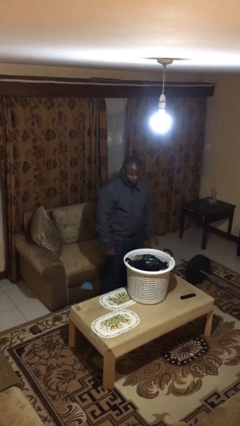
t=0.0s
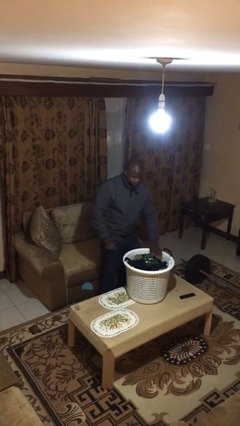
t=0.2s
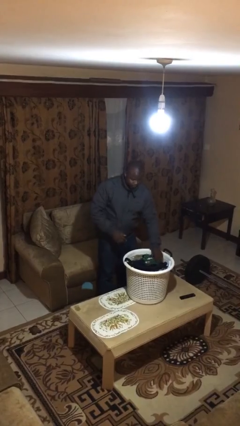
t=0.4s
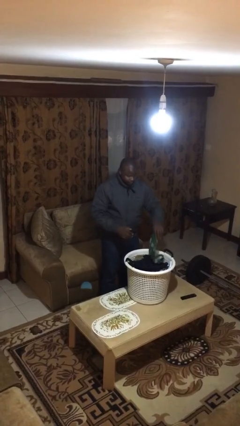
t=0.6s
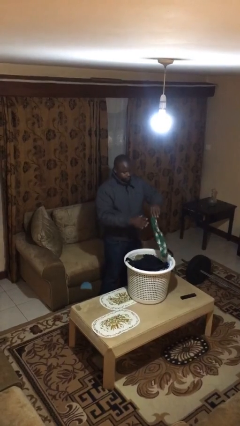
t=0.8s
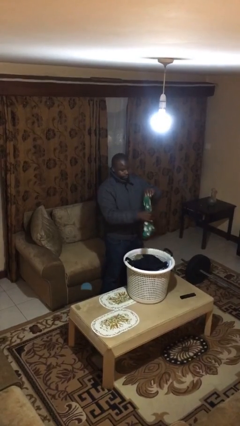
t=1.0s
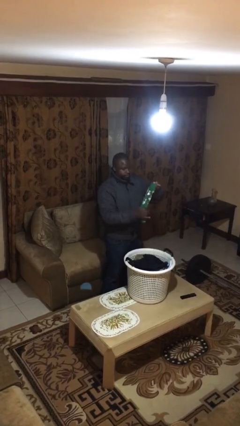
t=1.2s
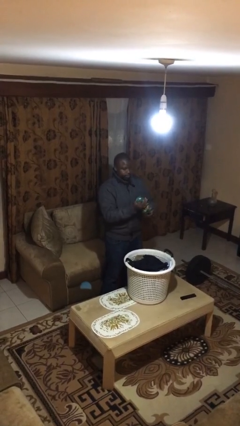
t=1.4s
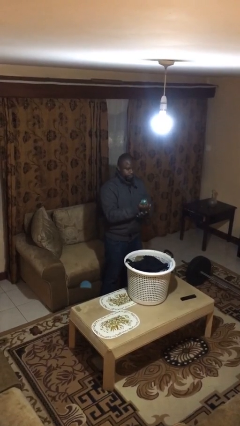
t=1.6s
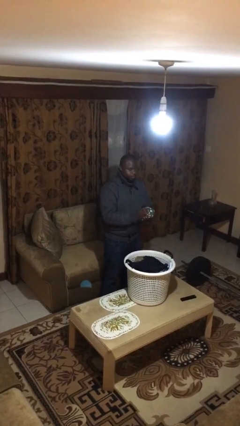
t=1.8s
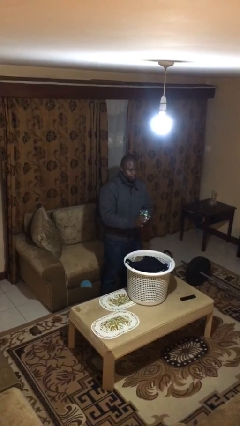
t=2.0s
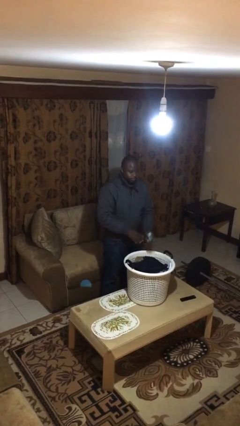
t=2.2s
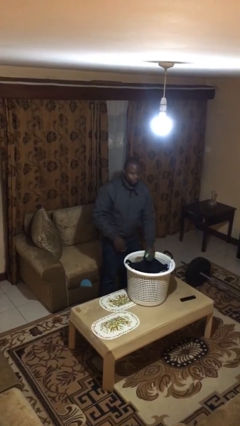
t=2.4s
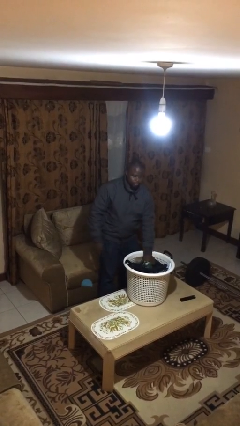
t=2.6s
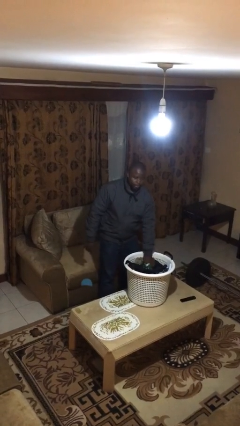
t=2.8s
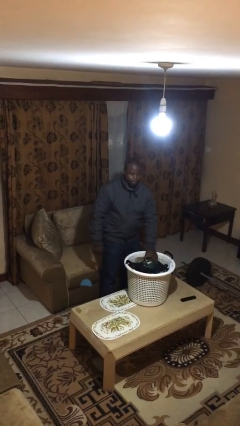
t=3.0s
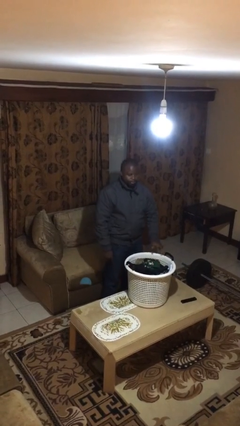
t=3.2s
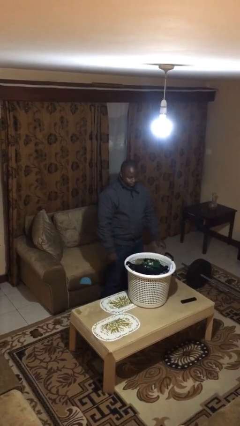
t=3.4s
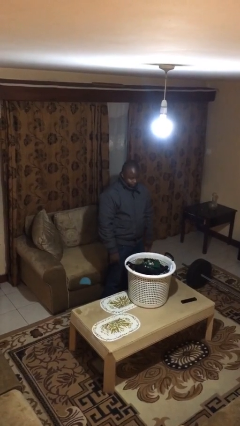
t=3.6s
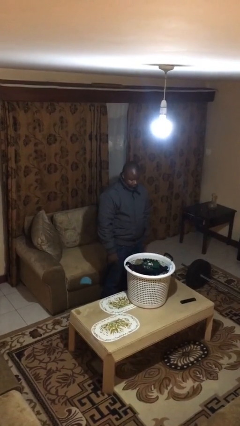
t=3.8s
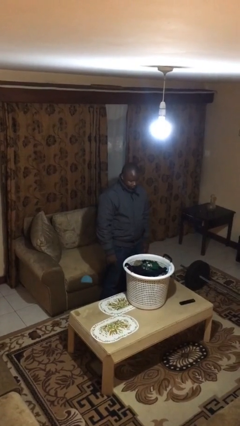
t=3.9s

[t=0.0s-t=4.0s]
person folds socks

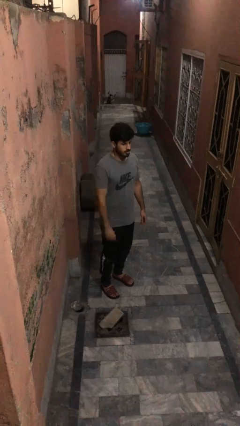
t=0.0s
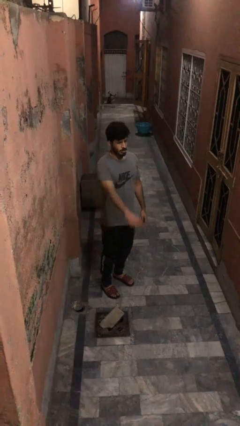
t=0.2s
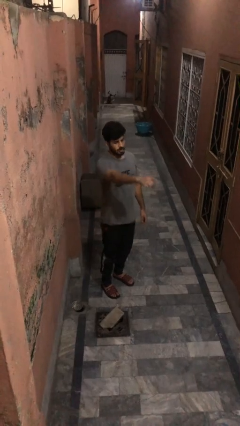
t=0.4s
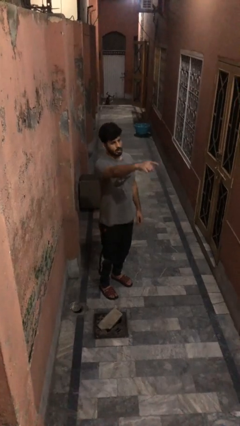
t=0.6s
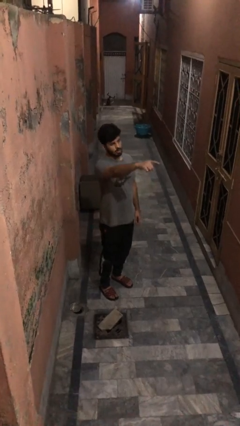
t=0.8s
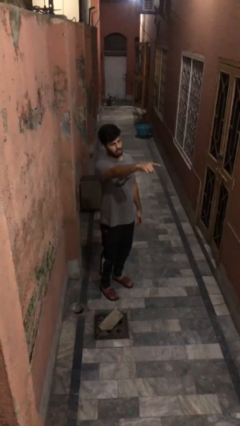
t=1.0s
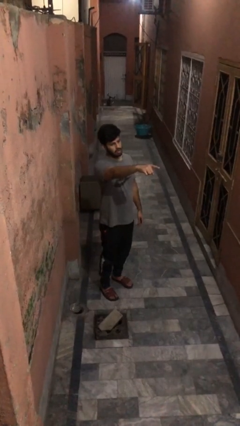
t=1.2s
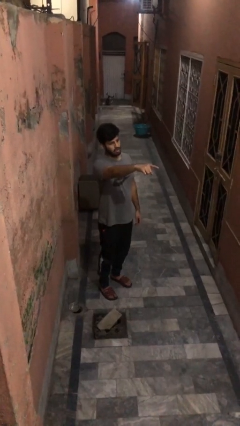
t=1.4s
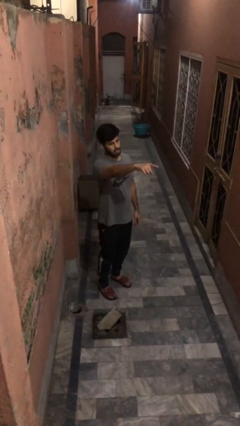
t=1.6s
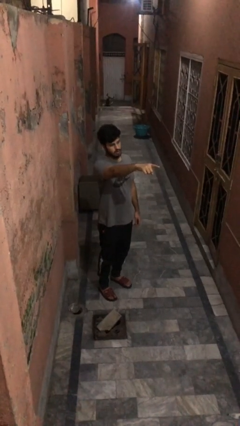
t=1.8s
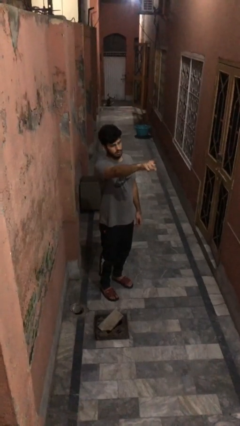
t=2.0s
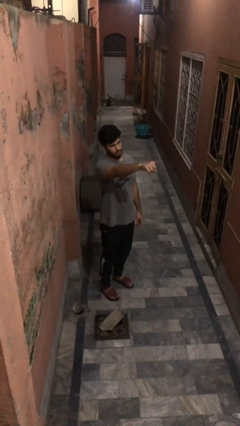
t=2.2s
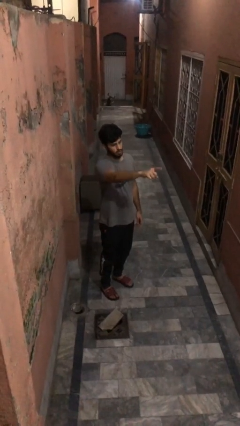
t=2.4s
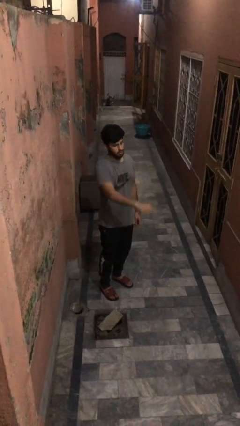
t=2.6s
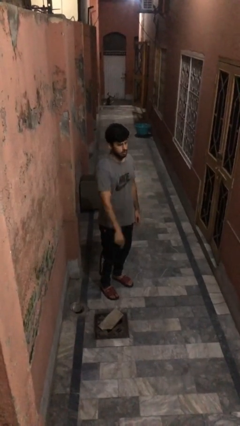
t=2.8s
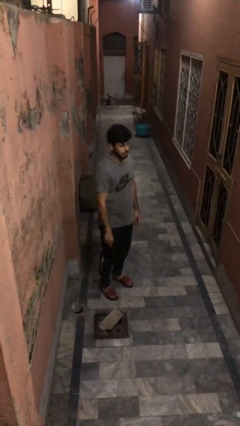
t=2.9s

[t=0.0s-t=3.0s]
person points at person

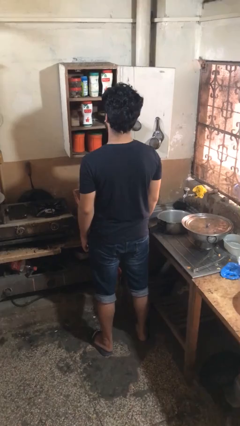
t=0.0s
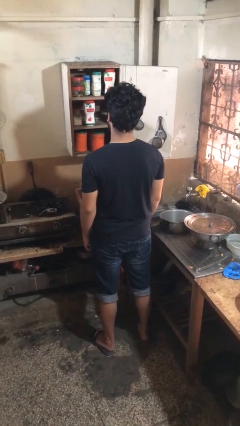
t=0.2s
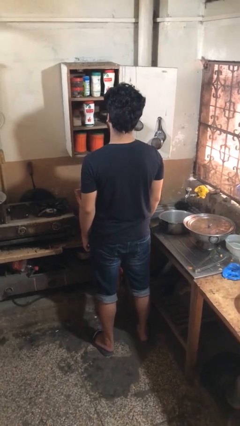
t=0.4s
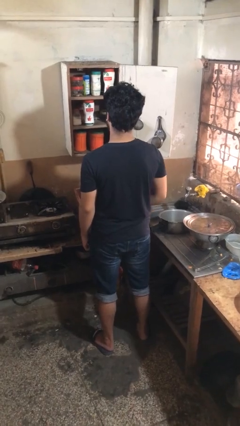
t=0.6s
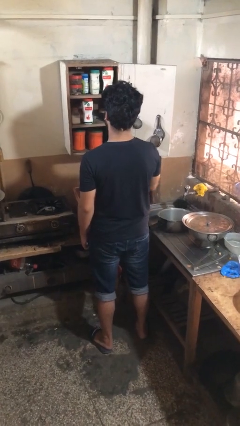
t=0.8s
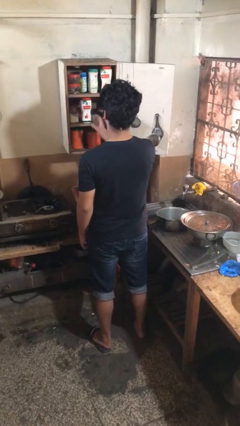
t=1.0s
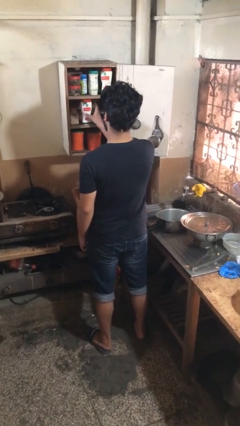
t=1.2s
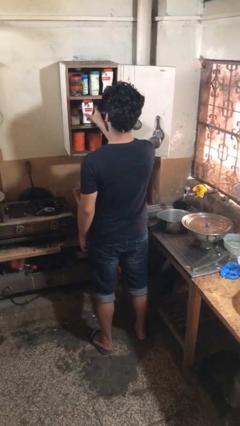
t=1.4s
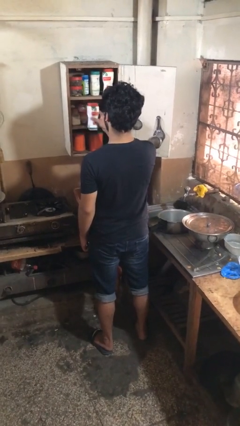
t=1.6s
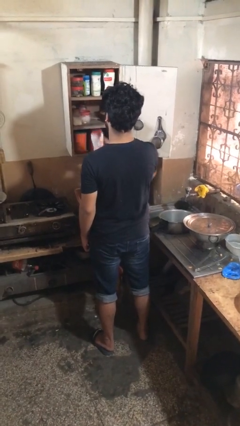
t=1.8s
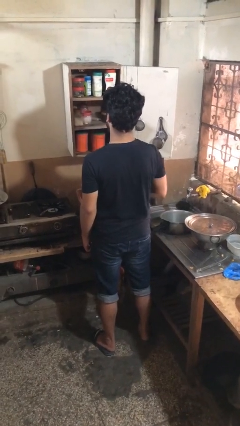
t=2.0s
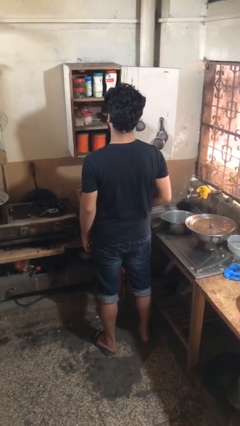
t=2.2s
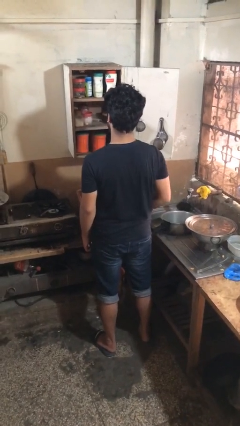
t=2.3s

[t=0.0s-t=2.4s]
person picks up object from cabinet

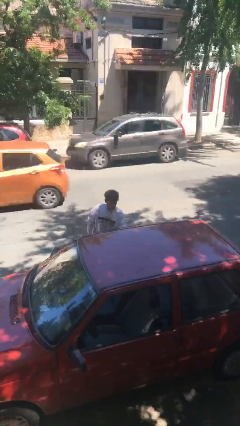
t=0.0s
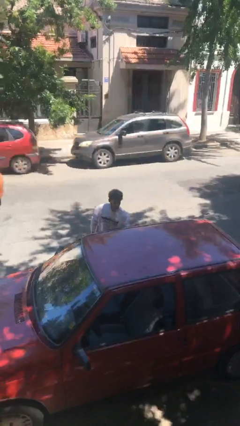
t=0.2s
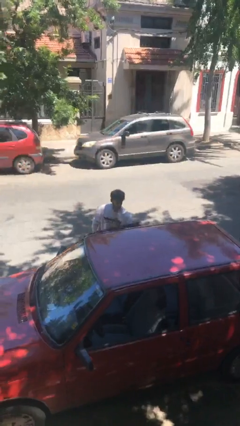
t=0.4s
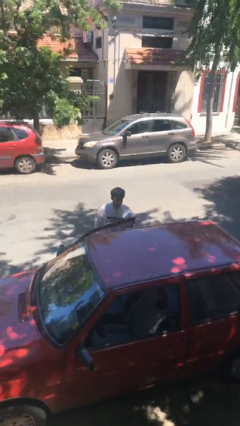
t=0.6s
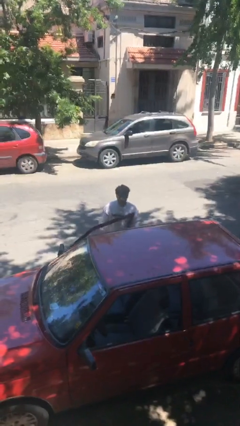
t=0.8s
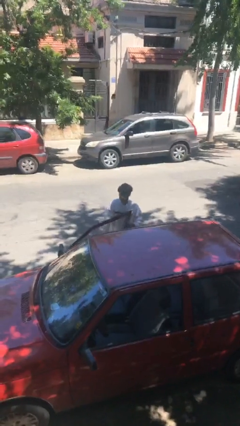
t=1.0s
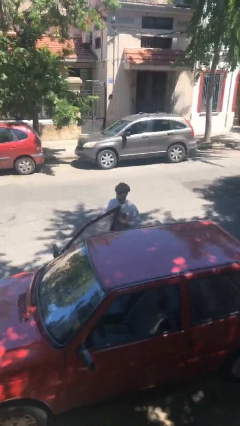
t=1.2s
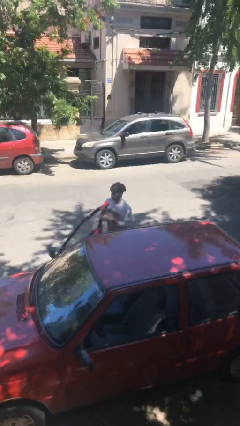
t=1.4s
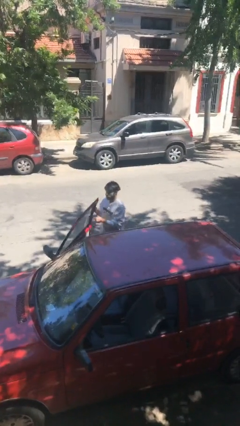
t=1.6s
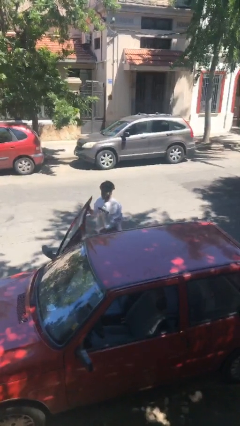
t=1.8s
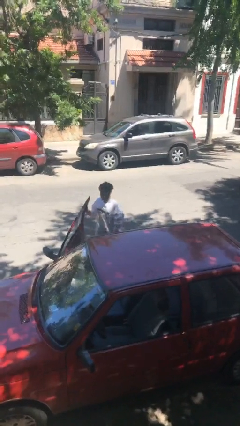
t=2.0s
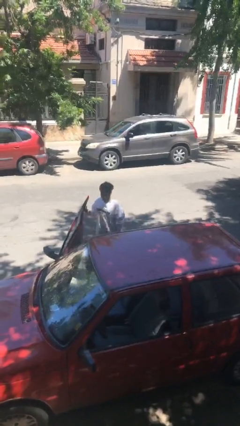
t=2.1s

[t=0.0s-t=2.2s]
person opens car door

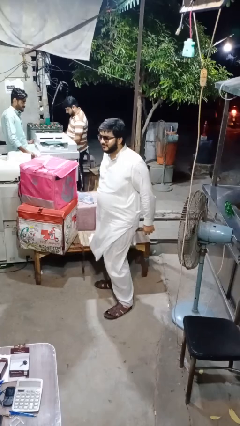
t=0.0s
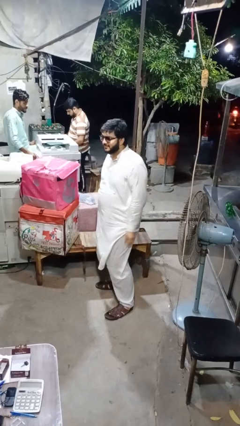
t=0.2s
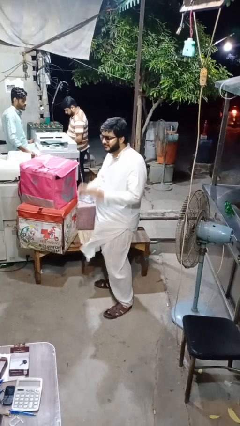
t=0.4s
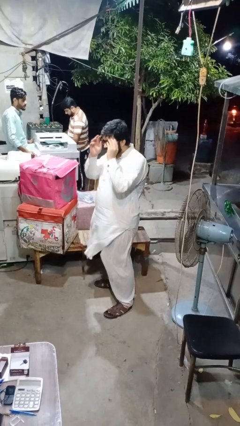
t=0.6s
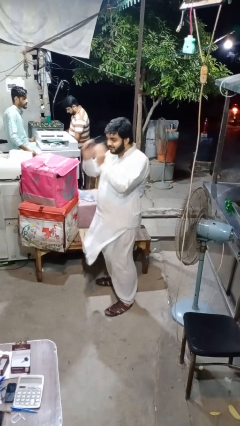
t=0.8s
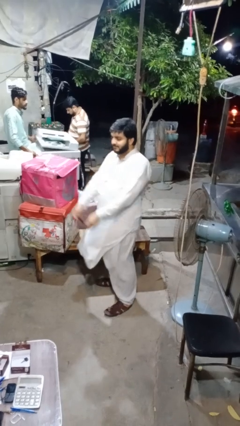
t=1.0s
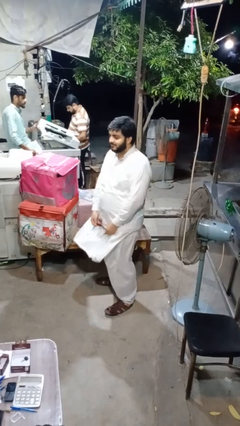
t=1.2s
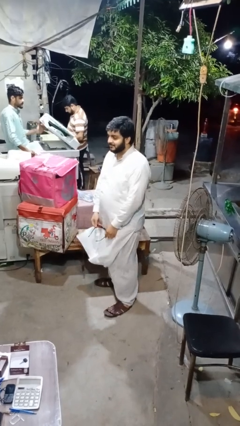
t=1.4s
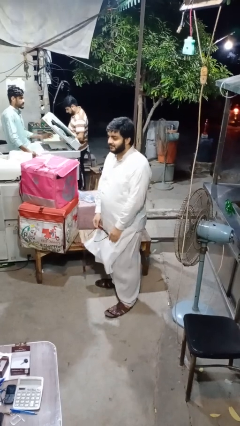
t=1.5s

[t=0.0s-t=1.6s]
person takes off glasses

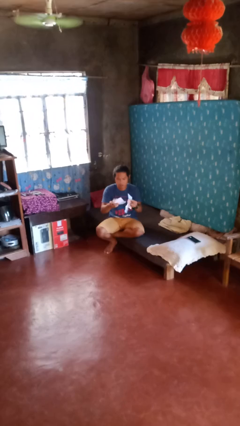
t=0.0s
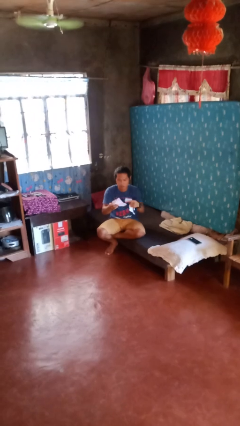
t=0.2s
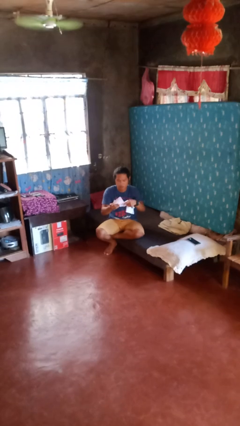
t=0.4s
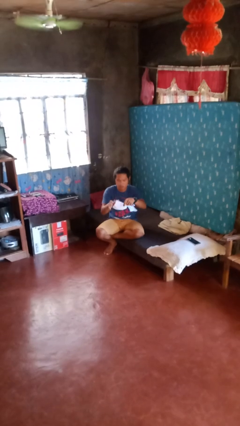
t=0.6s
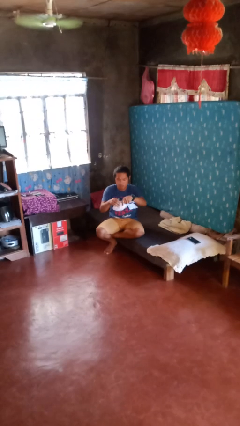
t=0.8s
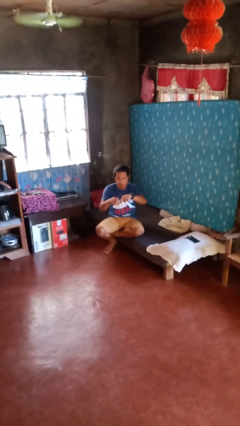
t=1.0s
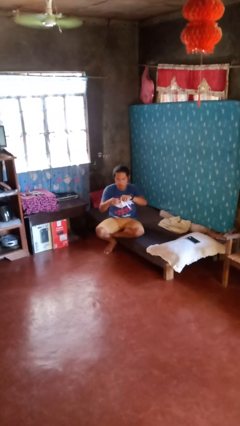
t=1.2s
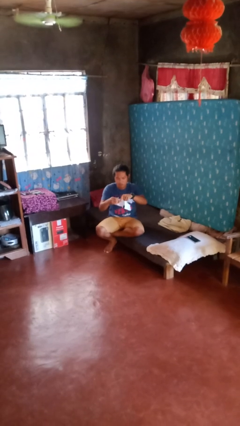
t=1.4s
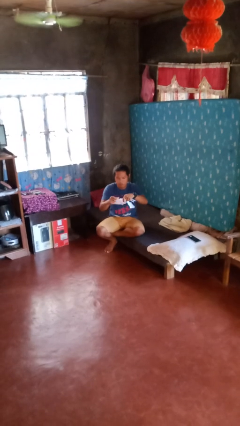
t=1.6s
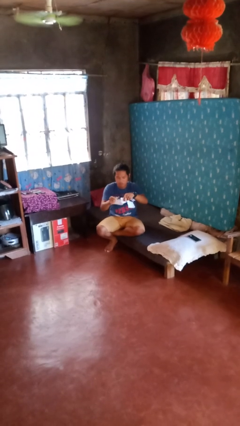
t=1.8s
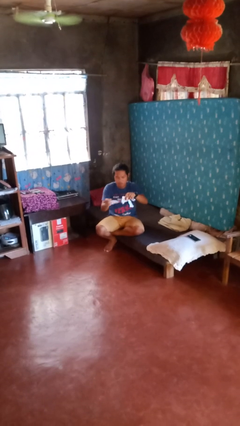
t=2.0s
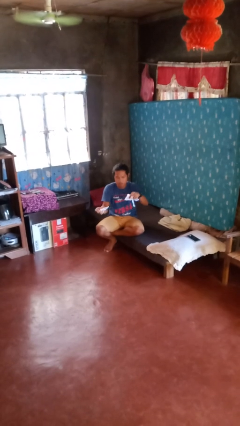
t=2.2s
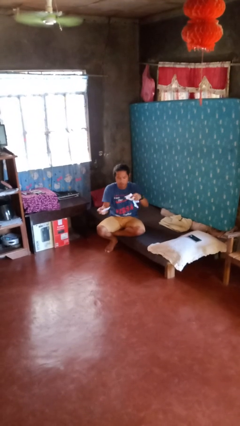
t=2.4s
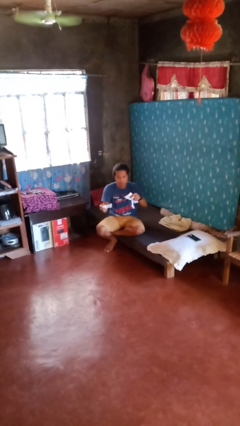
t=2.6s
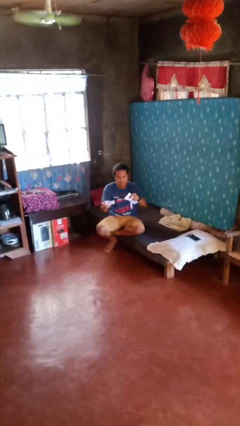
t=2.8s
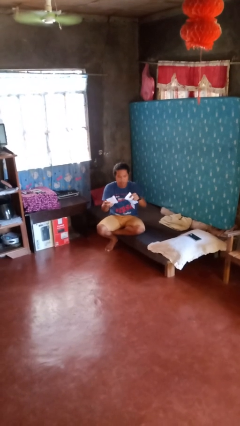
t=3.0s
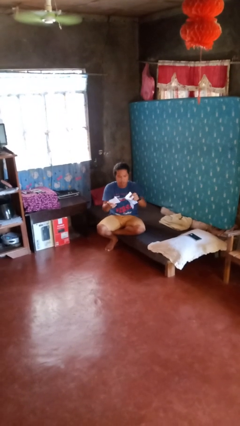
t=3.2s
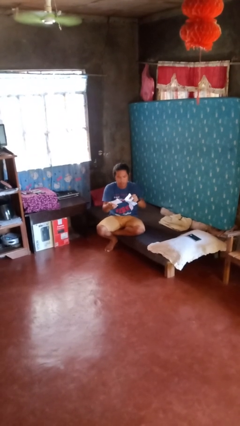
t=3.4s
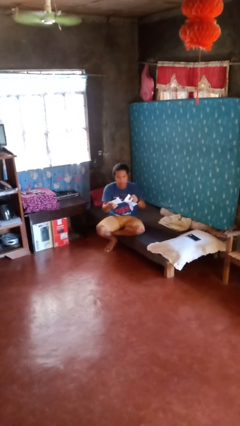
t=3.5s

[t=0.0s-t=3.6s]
person tears paper

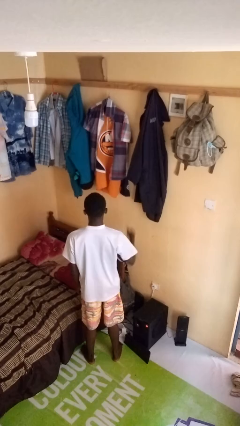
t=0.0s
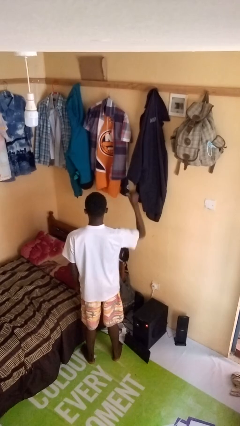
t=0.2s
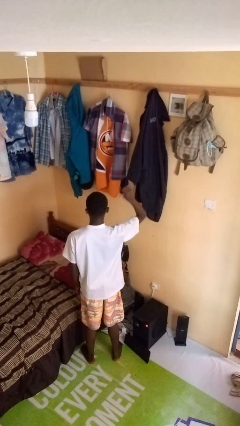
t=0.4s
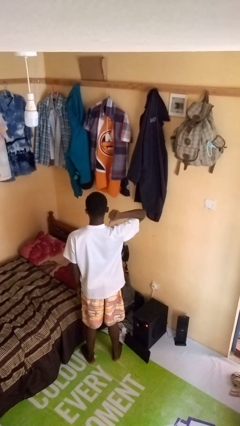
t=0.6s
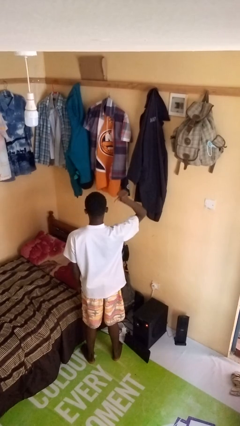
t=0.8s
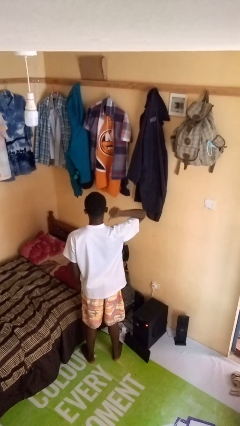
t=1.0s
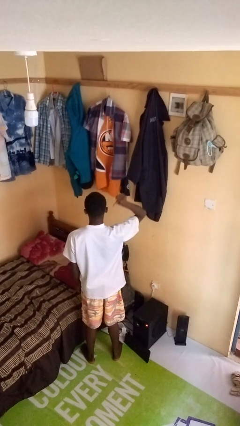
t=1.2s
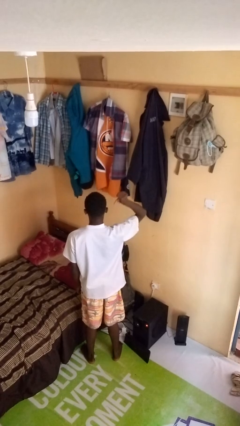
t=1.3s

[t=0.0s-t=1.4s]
person gestures behind me
